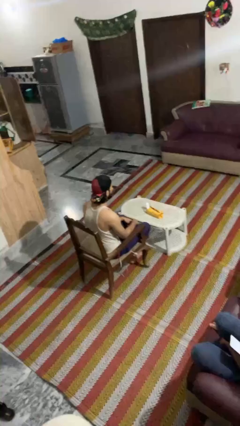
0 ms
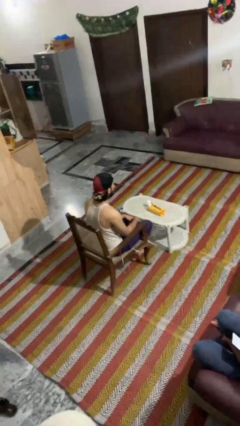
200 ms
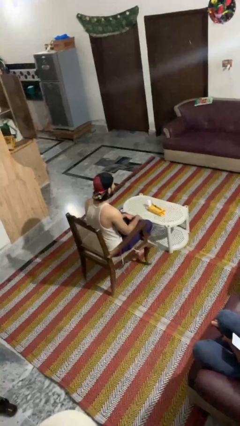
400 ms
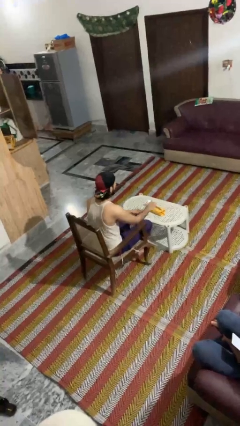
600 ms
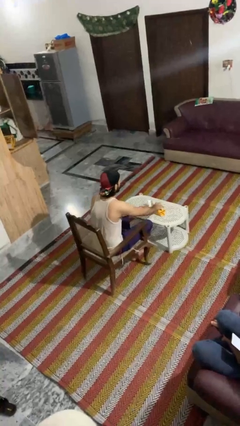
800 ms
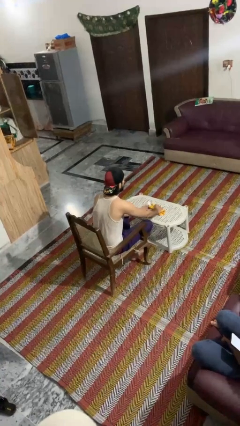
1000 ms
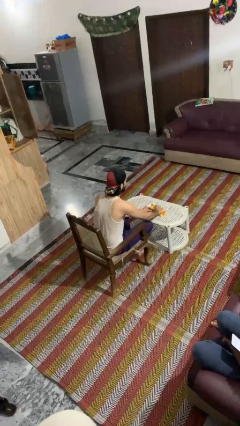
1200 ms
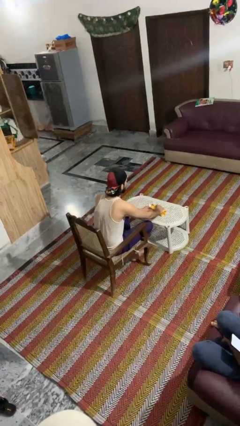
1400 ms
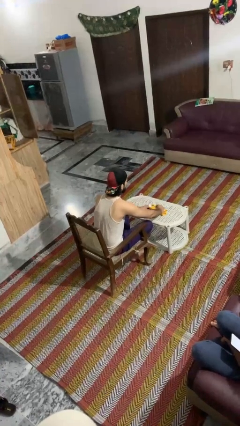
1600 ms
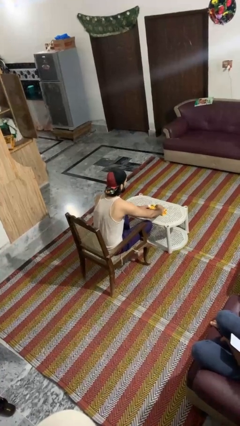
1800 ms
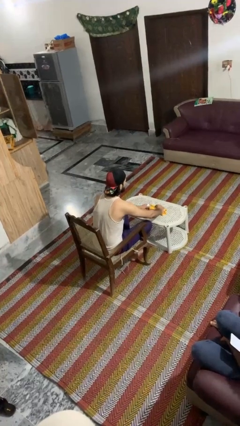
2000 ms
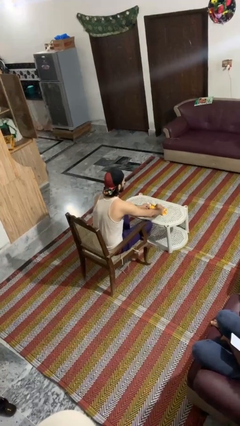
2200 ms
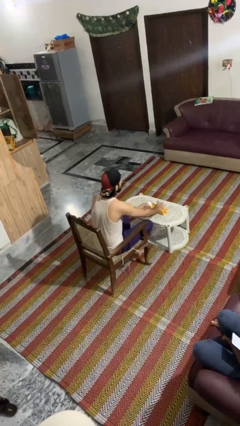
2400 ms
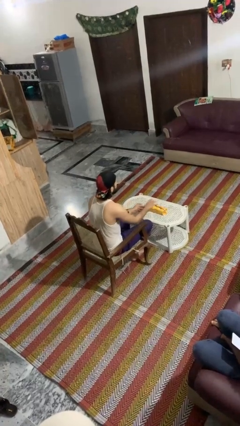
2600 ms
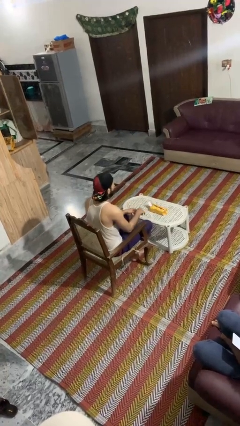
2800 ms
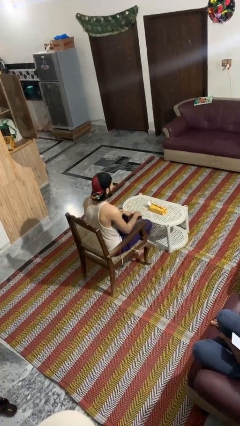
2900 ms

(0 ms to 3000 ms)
person wraps box

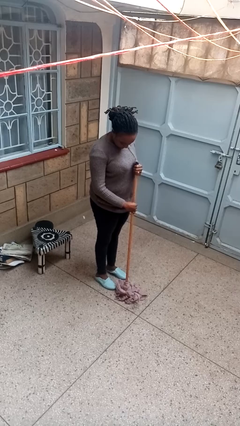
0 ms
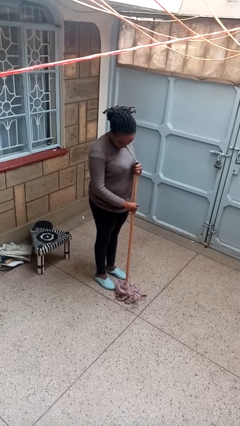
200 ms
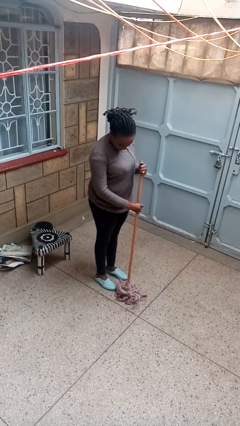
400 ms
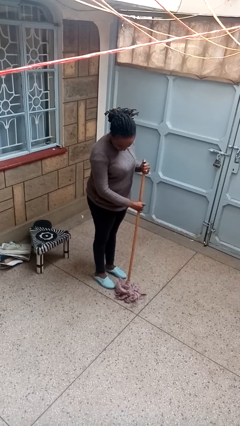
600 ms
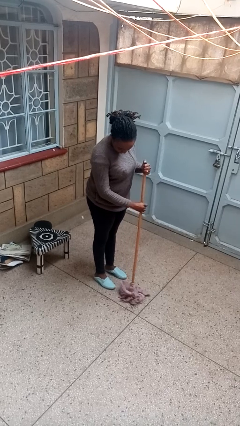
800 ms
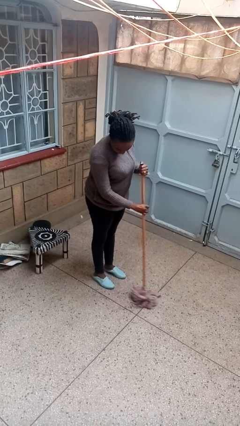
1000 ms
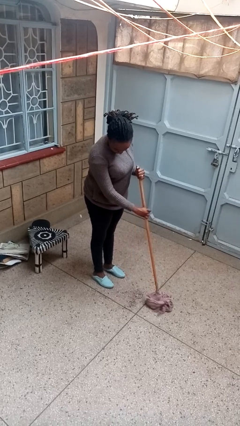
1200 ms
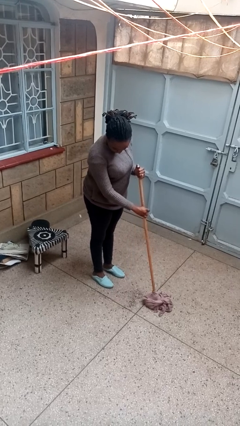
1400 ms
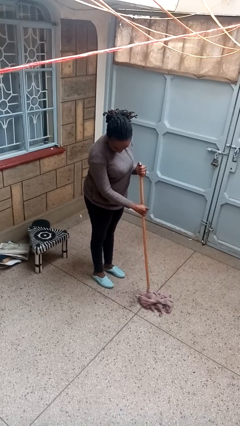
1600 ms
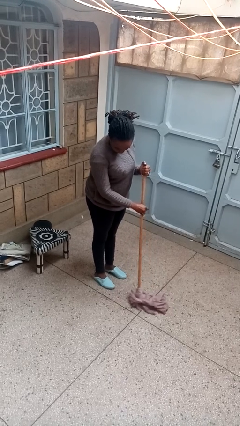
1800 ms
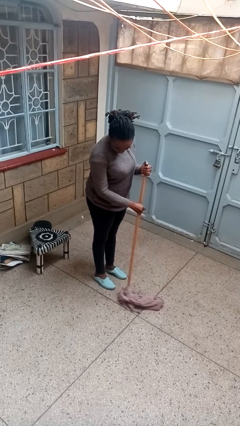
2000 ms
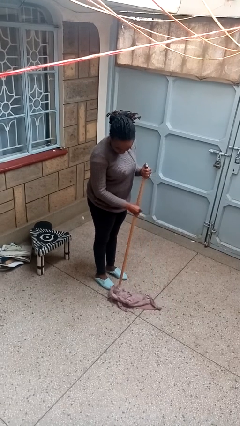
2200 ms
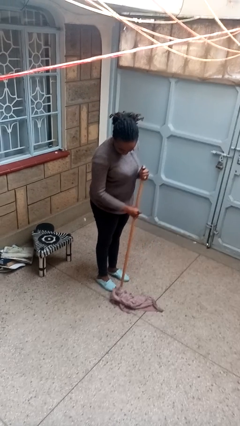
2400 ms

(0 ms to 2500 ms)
person mops

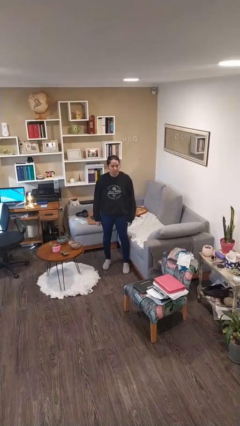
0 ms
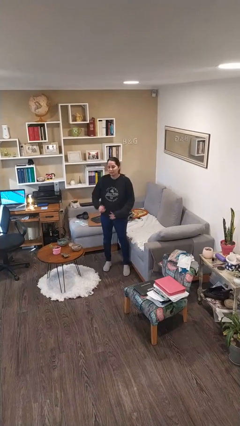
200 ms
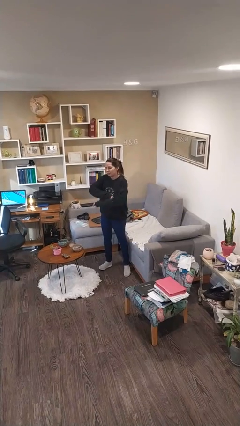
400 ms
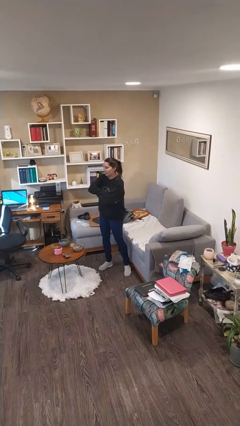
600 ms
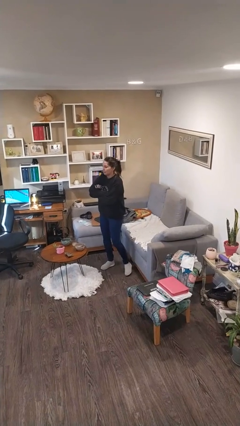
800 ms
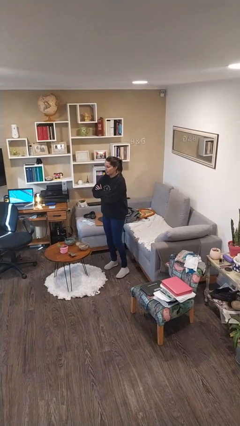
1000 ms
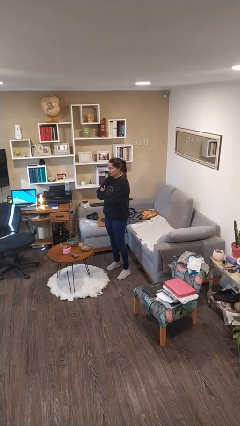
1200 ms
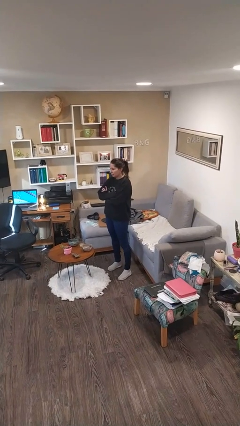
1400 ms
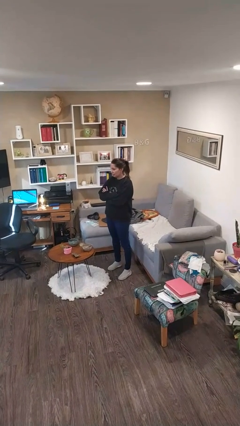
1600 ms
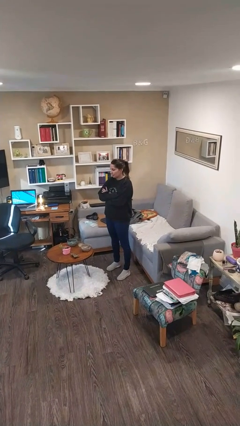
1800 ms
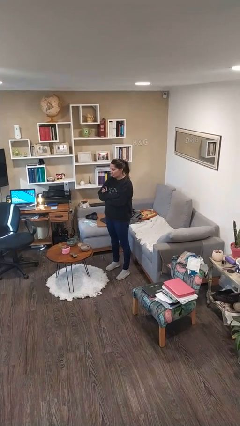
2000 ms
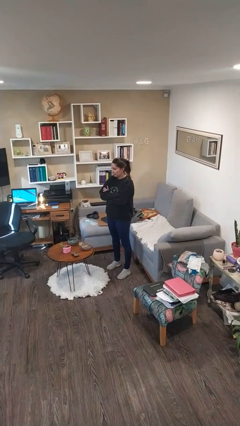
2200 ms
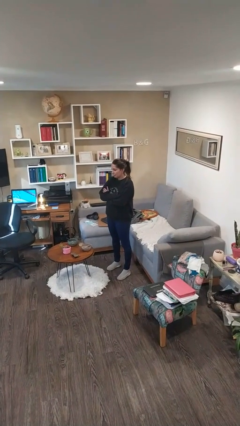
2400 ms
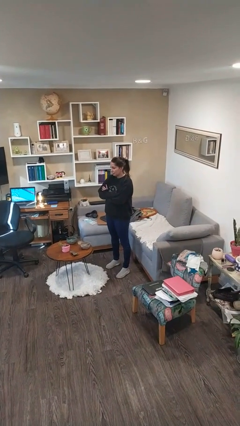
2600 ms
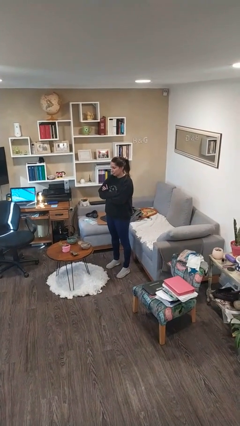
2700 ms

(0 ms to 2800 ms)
person crosses arms

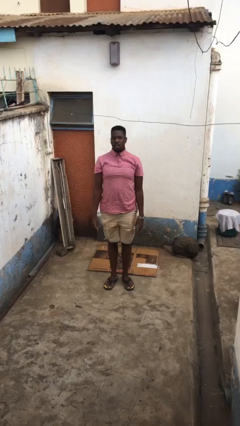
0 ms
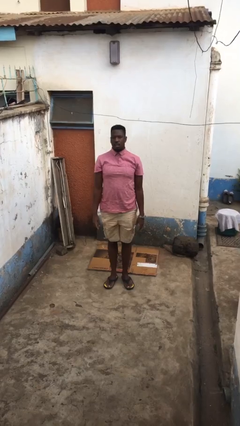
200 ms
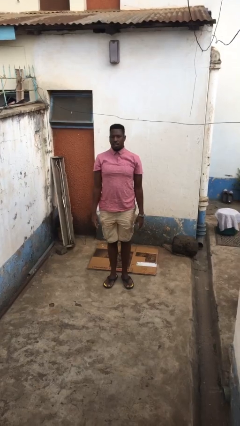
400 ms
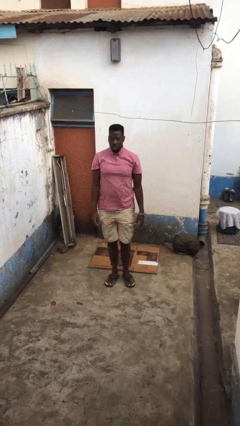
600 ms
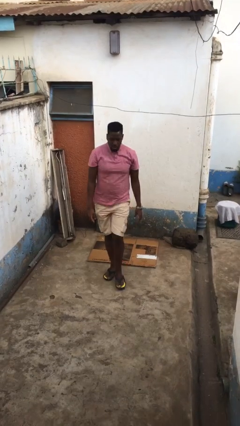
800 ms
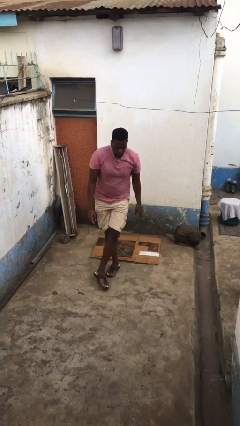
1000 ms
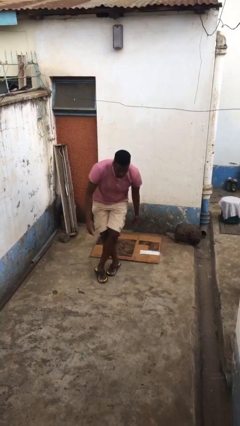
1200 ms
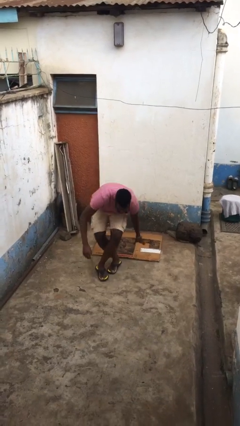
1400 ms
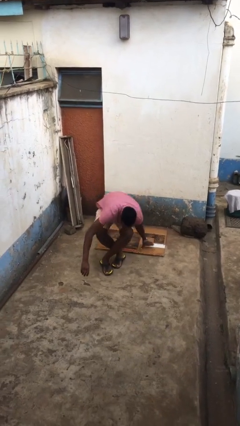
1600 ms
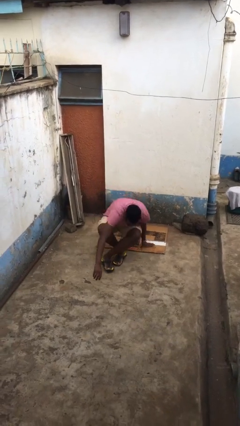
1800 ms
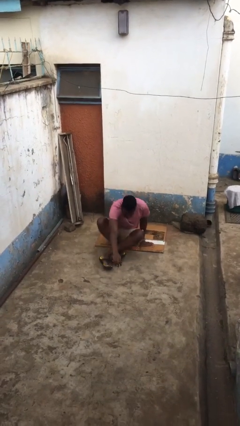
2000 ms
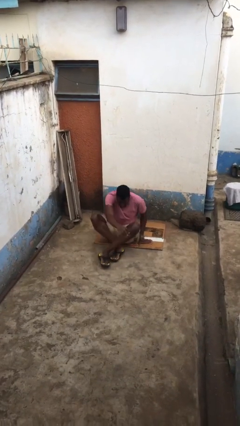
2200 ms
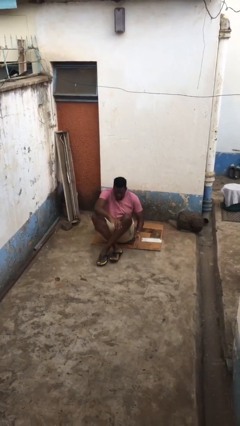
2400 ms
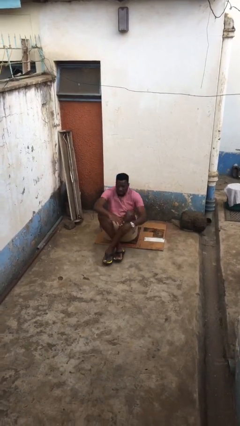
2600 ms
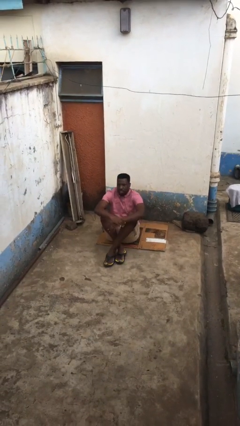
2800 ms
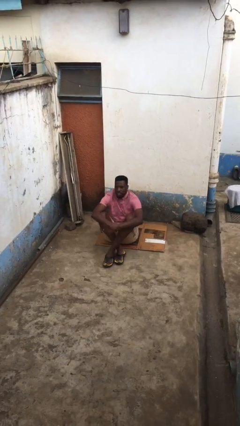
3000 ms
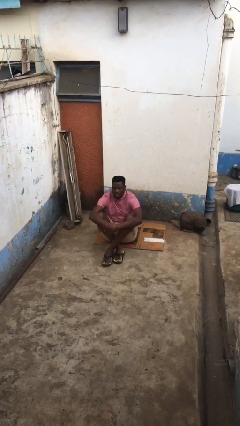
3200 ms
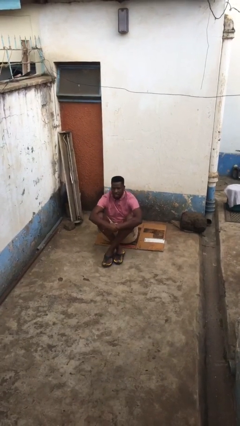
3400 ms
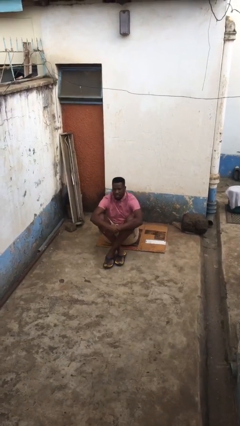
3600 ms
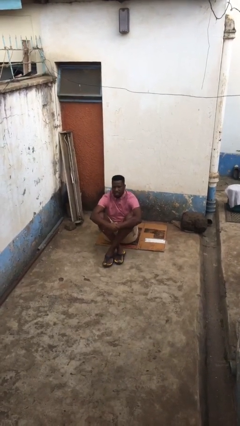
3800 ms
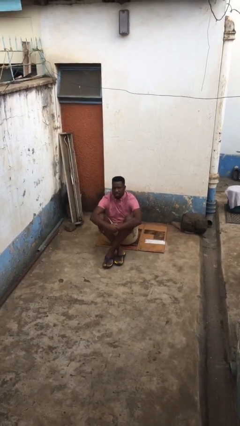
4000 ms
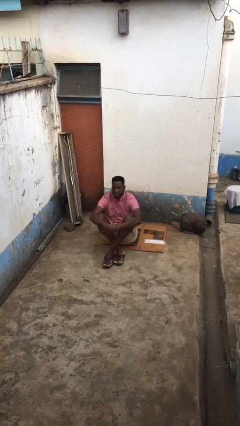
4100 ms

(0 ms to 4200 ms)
person sits crisscross

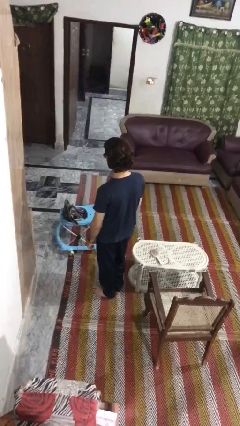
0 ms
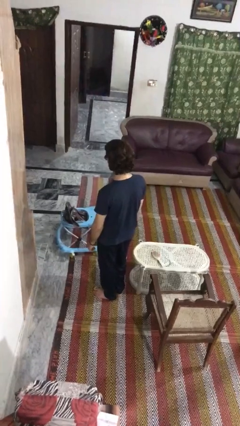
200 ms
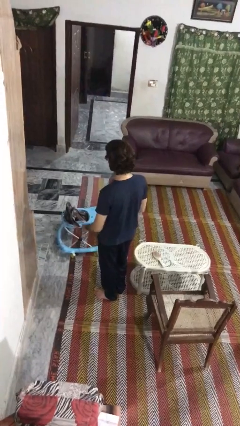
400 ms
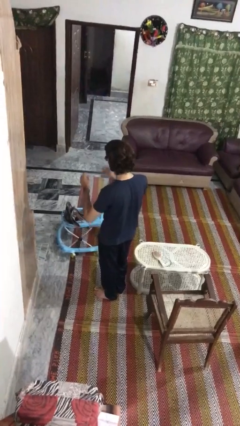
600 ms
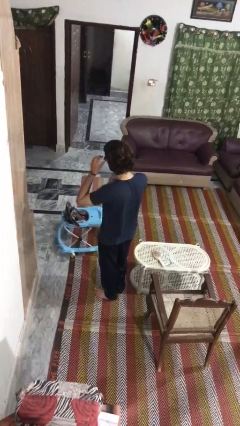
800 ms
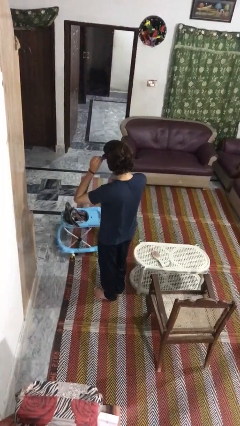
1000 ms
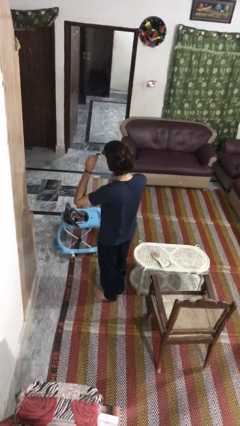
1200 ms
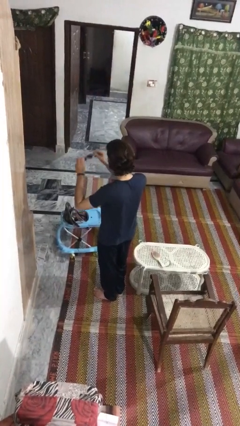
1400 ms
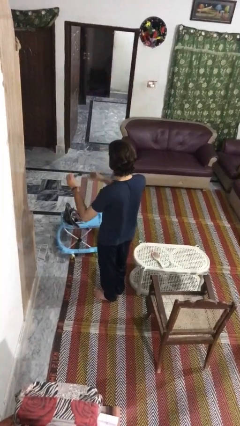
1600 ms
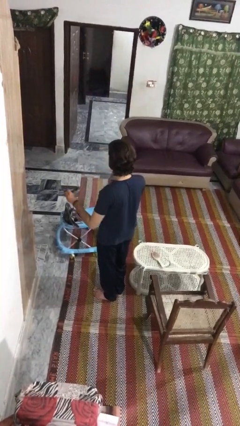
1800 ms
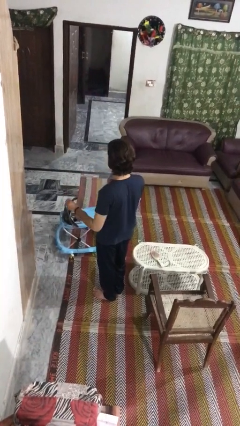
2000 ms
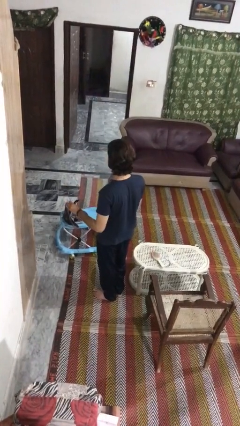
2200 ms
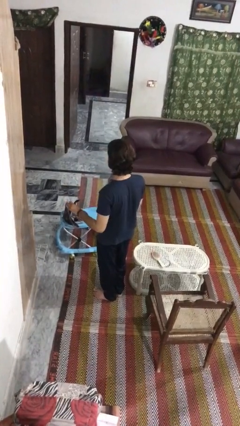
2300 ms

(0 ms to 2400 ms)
person takes off sunglasses

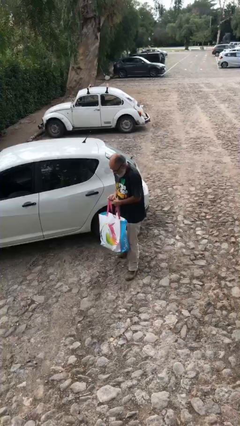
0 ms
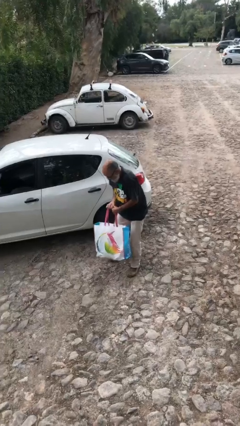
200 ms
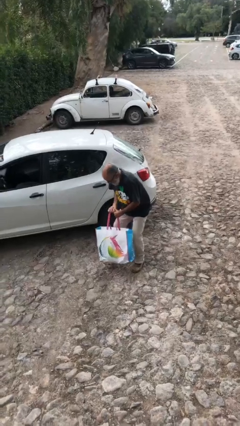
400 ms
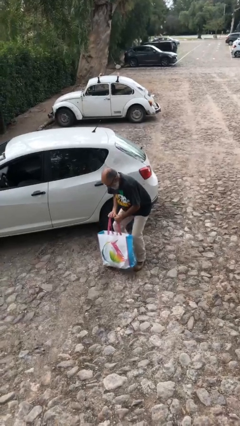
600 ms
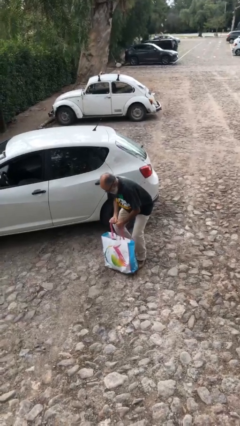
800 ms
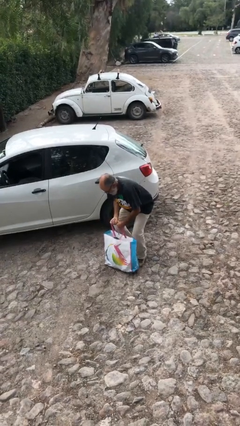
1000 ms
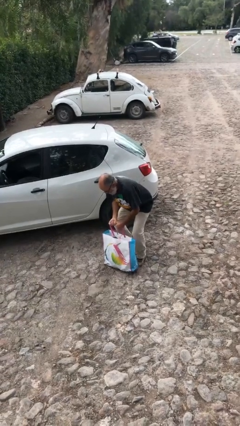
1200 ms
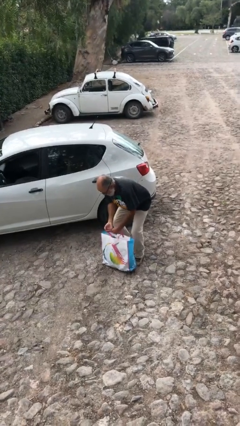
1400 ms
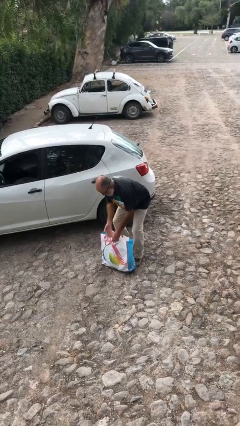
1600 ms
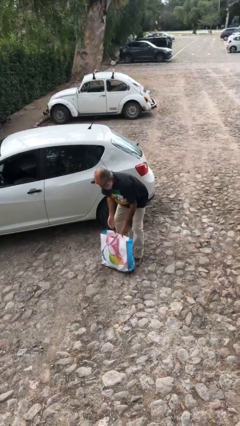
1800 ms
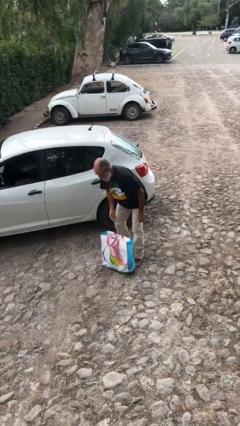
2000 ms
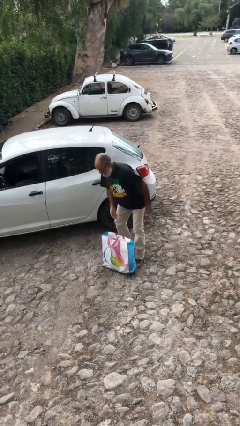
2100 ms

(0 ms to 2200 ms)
person puts down object on floor

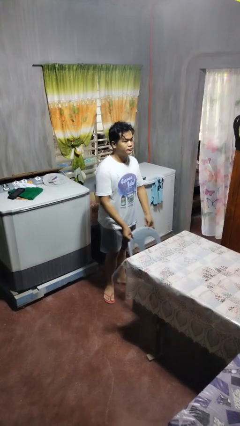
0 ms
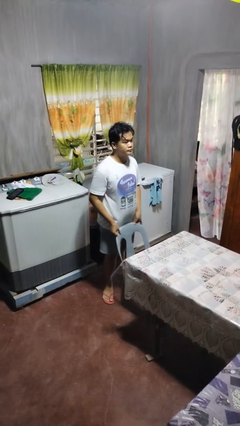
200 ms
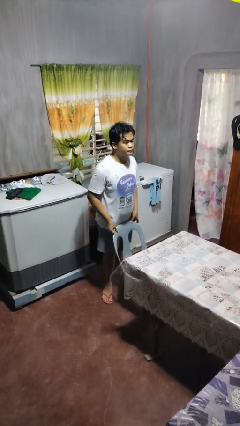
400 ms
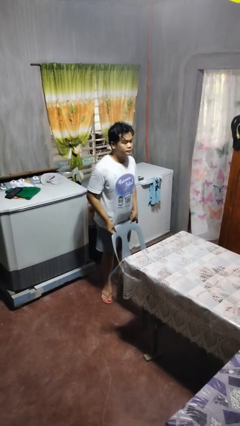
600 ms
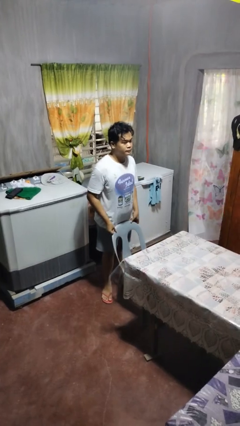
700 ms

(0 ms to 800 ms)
person pulls out chair
